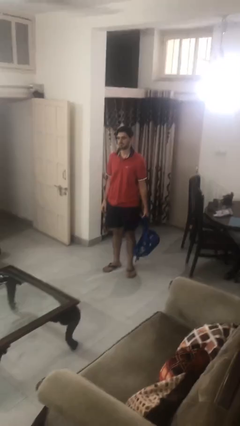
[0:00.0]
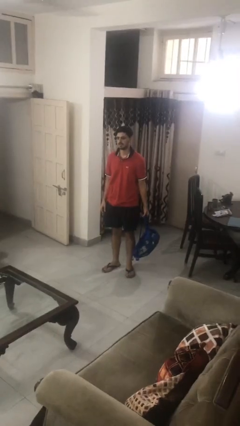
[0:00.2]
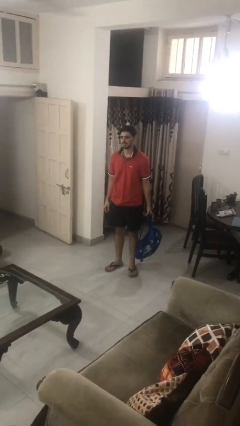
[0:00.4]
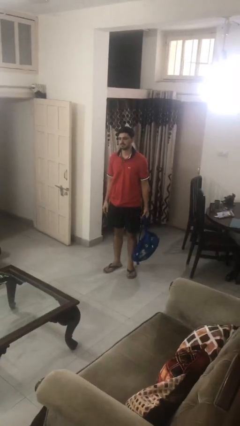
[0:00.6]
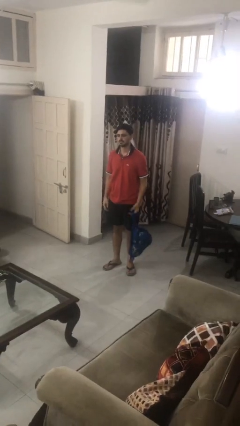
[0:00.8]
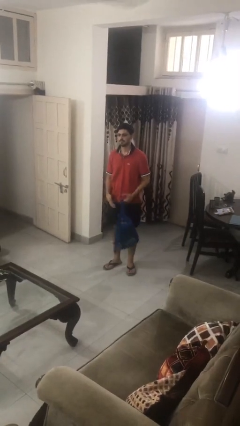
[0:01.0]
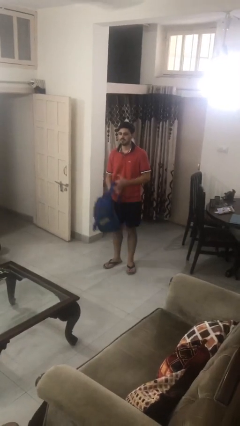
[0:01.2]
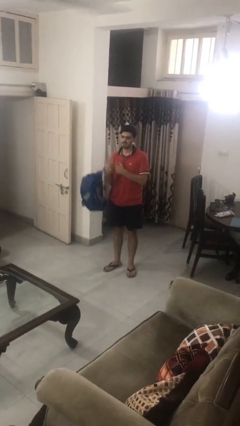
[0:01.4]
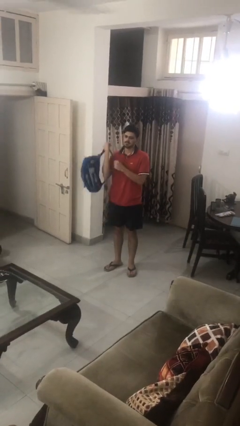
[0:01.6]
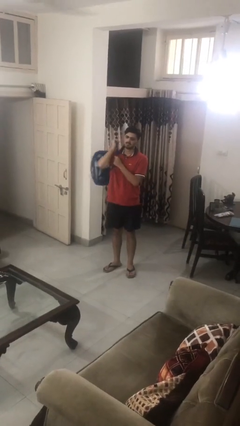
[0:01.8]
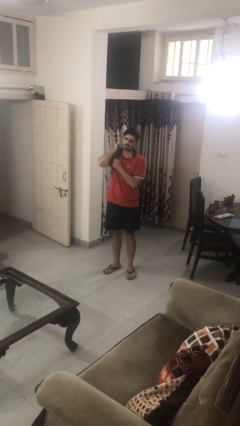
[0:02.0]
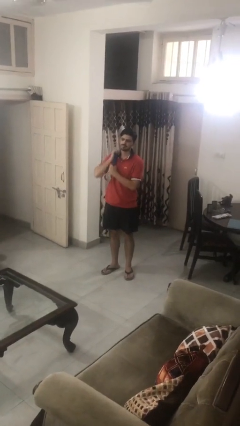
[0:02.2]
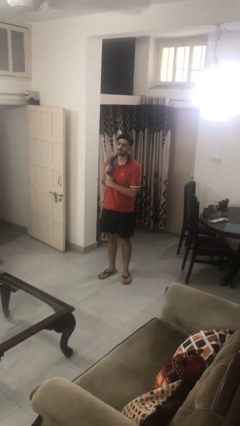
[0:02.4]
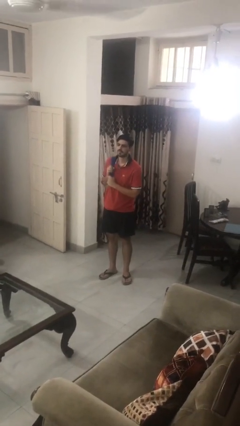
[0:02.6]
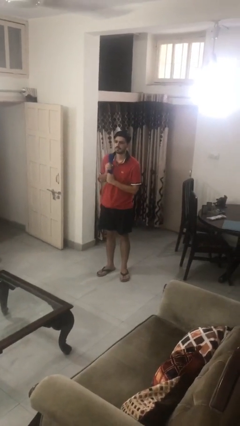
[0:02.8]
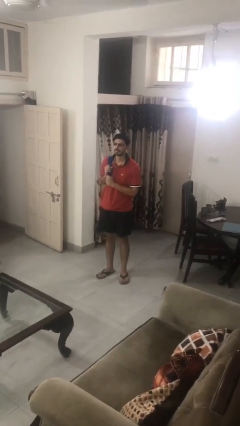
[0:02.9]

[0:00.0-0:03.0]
person puts on backpack

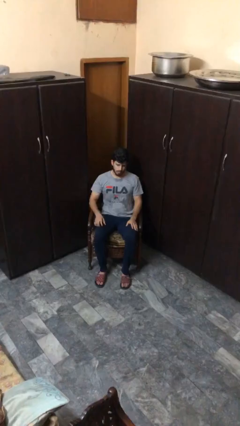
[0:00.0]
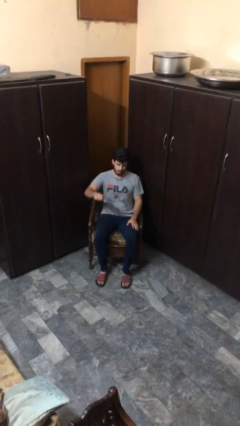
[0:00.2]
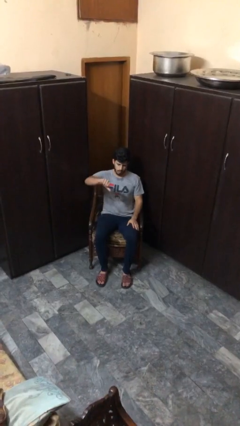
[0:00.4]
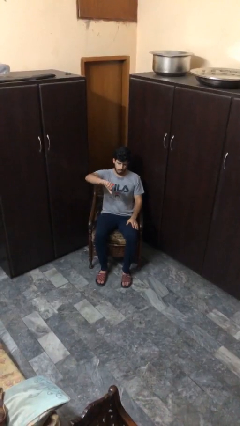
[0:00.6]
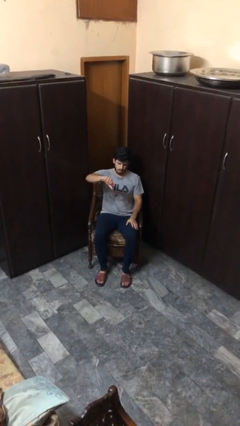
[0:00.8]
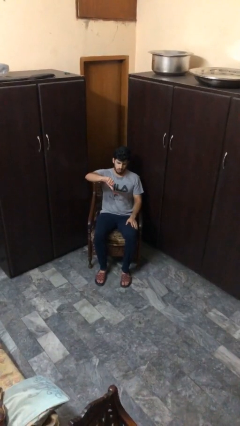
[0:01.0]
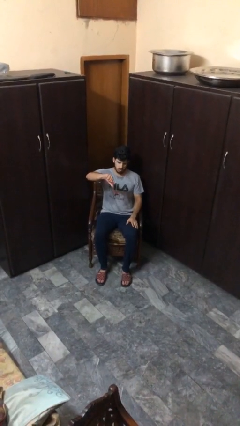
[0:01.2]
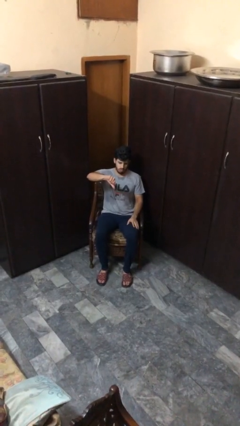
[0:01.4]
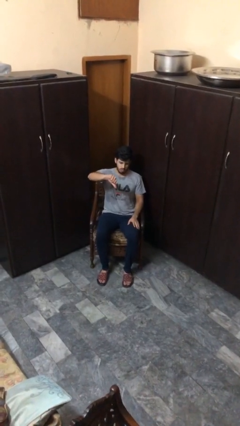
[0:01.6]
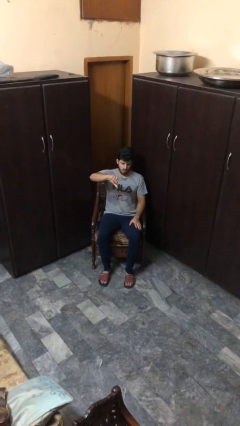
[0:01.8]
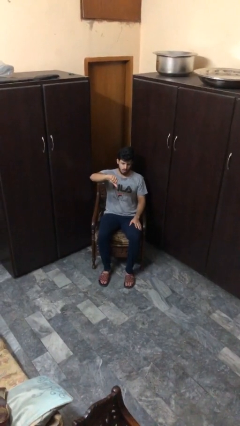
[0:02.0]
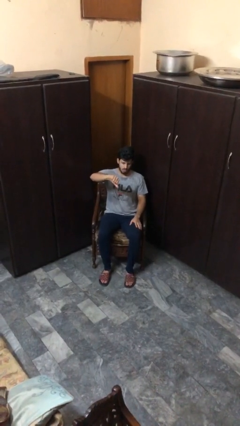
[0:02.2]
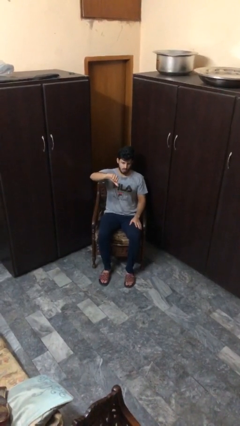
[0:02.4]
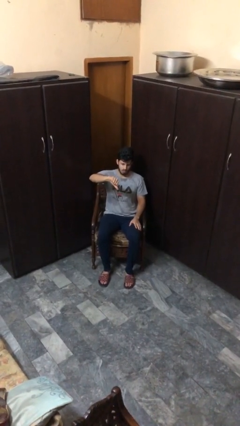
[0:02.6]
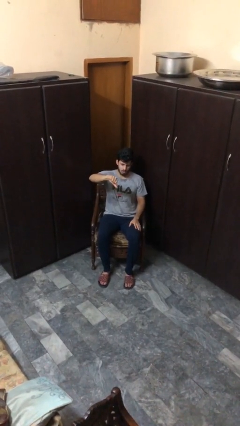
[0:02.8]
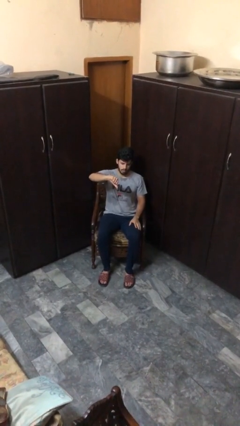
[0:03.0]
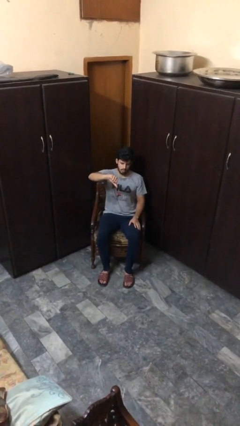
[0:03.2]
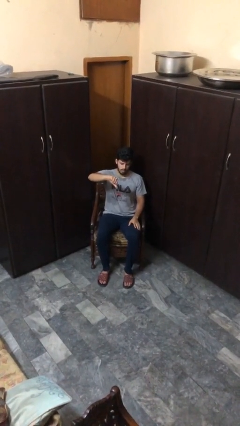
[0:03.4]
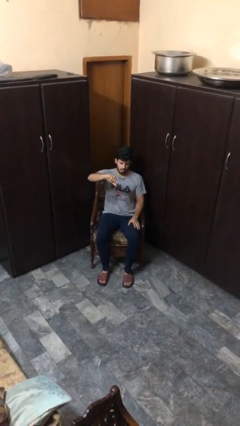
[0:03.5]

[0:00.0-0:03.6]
person gestures thumbs down

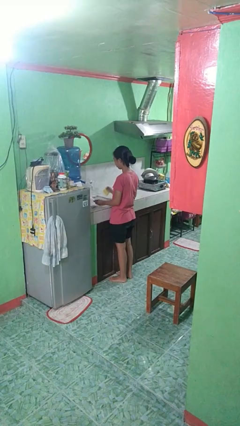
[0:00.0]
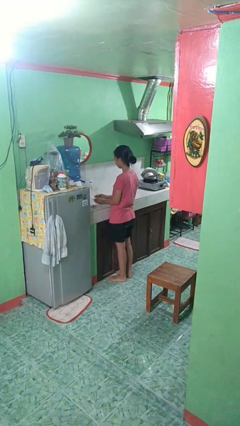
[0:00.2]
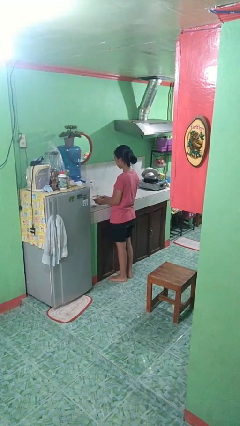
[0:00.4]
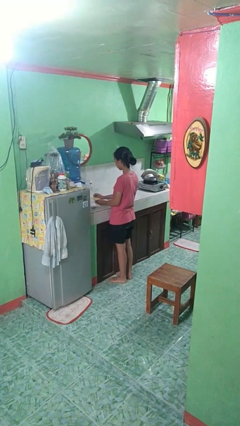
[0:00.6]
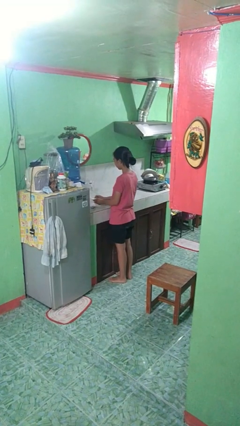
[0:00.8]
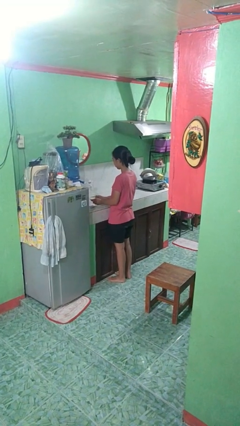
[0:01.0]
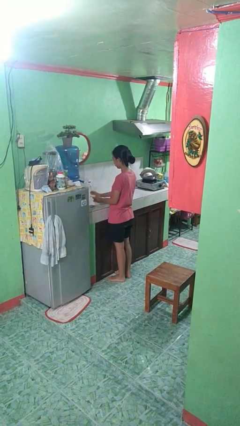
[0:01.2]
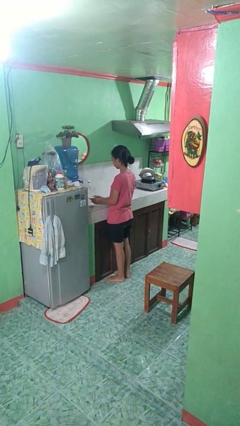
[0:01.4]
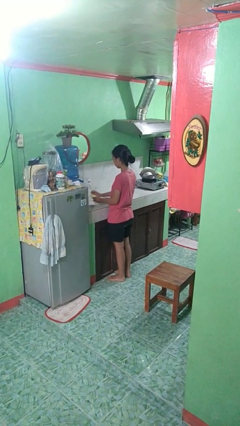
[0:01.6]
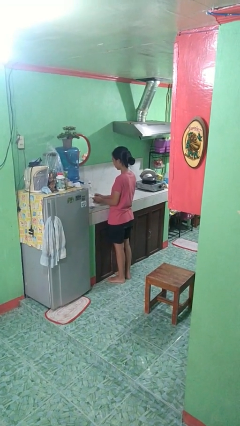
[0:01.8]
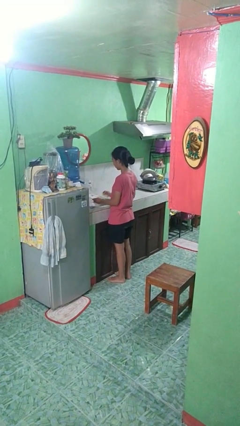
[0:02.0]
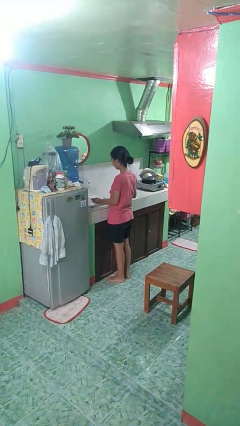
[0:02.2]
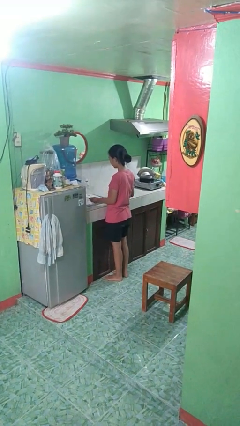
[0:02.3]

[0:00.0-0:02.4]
person washes dish

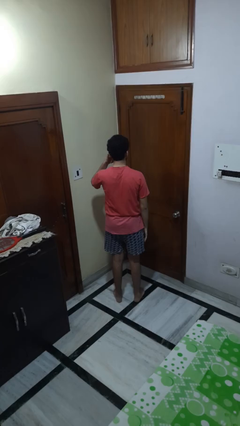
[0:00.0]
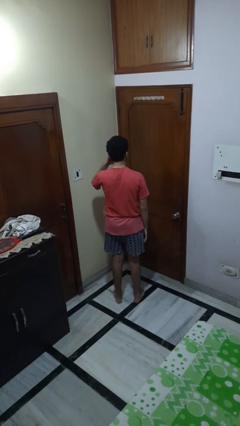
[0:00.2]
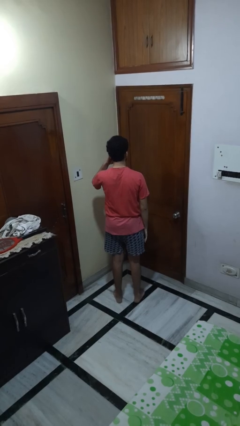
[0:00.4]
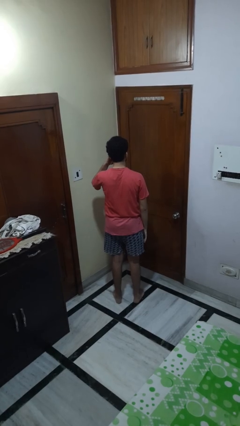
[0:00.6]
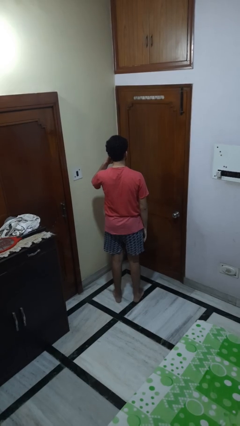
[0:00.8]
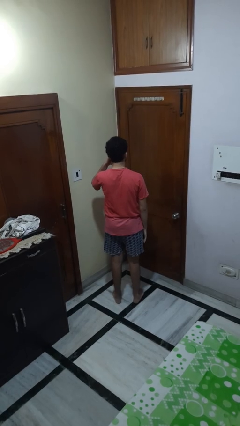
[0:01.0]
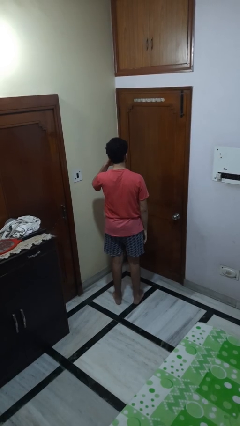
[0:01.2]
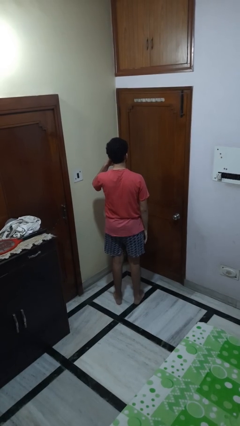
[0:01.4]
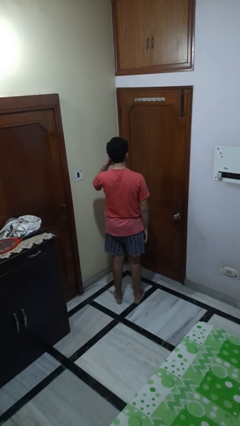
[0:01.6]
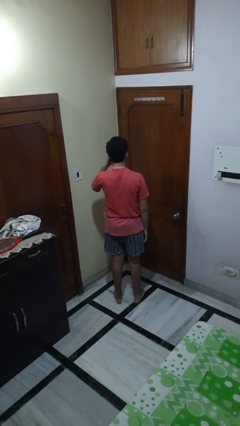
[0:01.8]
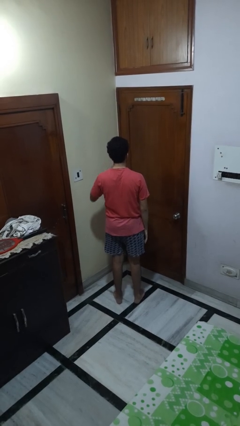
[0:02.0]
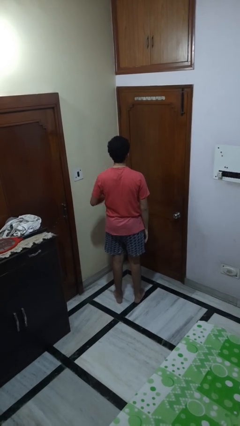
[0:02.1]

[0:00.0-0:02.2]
person gestures call me

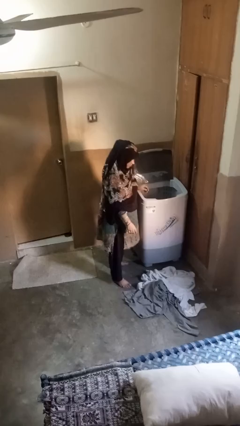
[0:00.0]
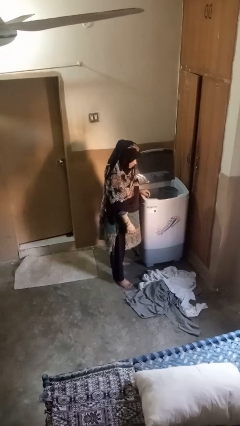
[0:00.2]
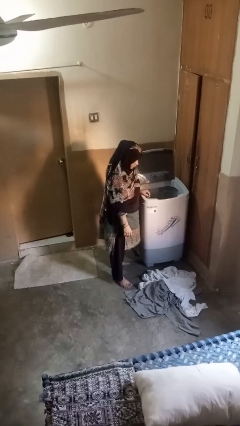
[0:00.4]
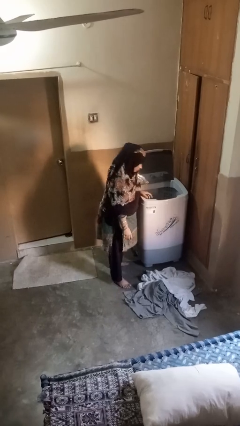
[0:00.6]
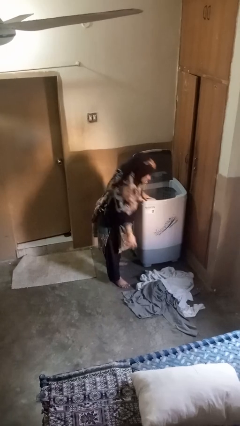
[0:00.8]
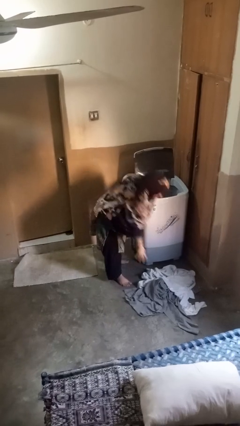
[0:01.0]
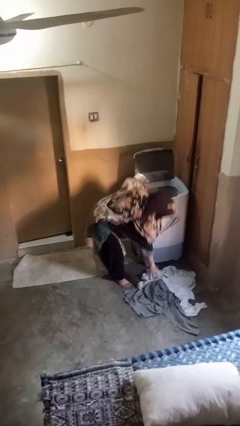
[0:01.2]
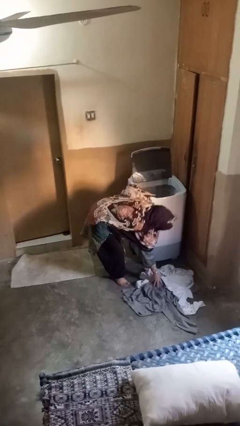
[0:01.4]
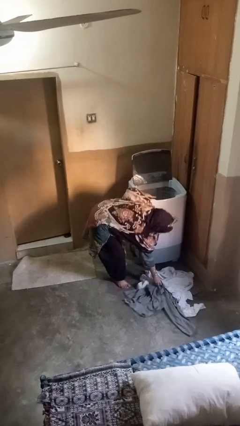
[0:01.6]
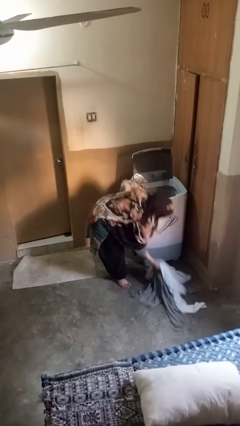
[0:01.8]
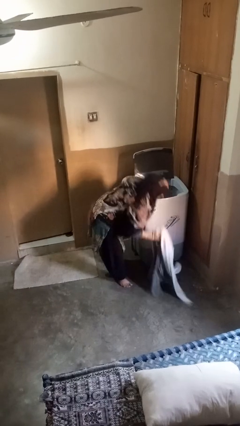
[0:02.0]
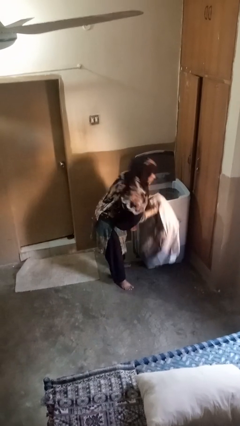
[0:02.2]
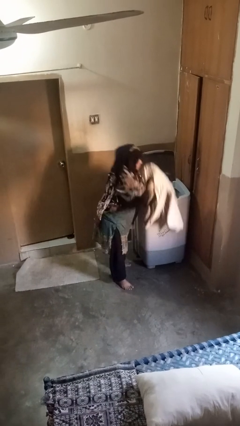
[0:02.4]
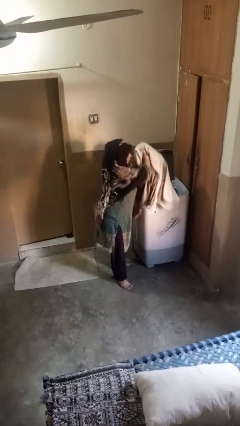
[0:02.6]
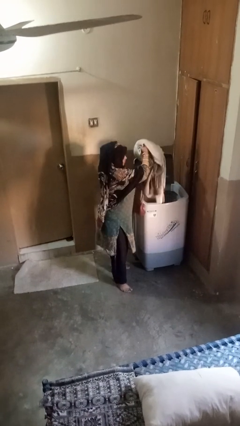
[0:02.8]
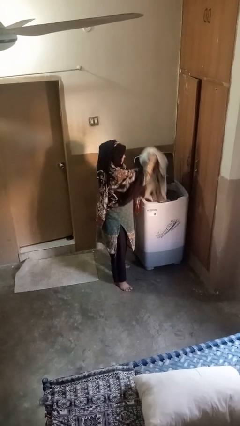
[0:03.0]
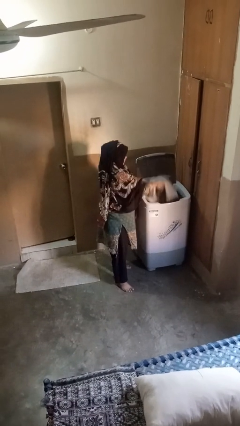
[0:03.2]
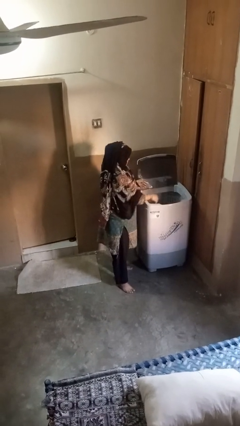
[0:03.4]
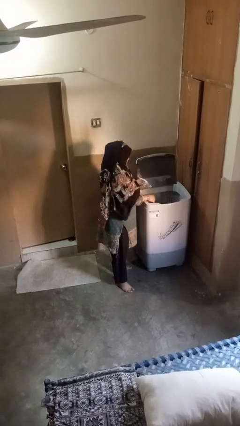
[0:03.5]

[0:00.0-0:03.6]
person loads clotheswasher

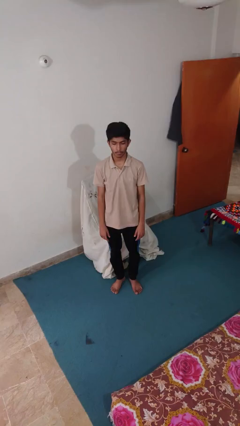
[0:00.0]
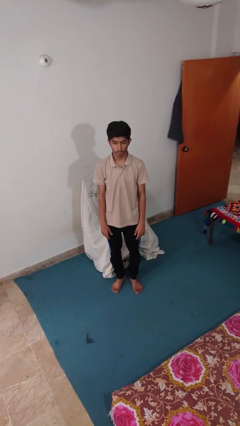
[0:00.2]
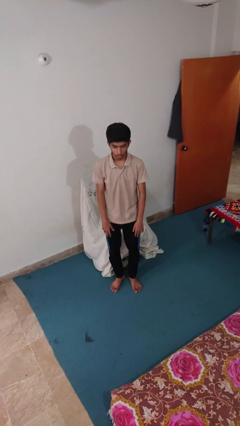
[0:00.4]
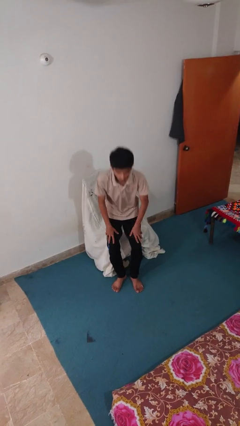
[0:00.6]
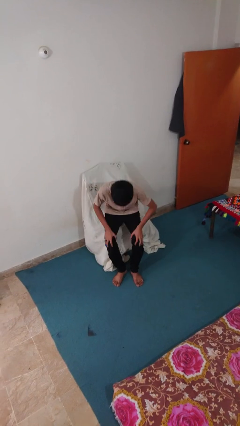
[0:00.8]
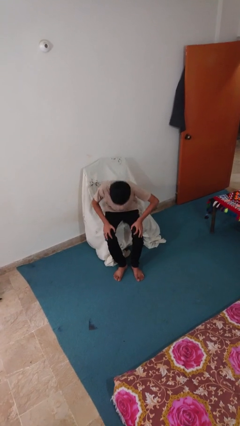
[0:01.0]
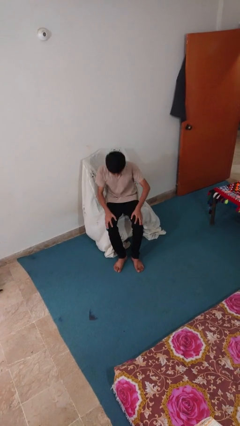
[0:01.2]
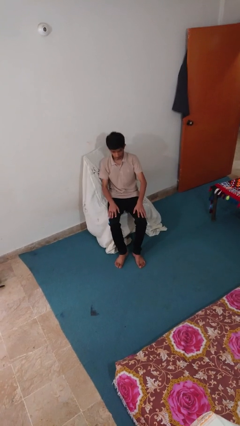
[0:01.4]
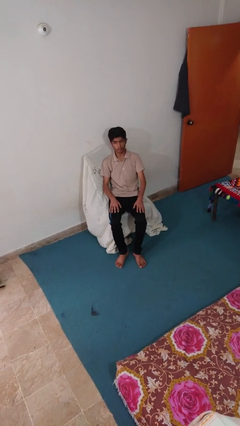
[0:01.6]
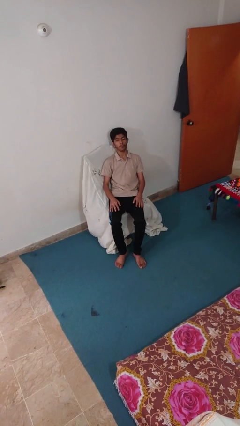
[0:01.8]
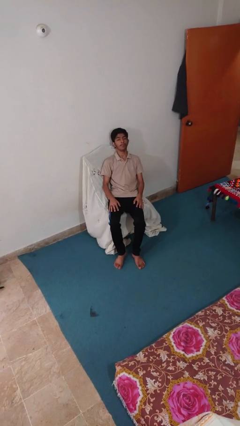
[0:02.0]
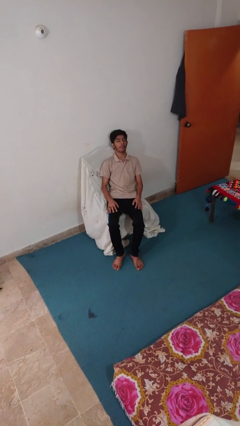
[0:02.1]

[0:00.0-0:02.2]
person lies down on couch

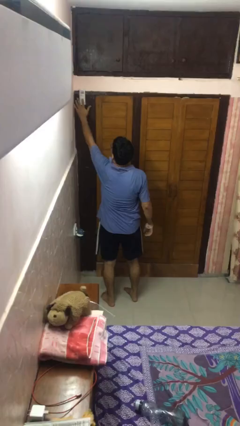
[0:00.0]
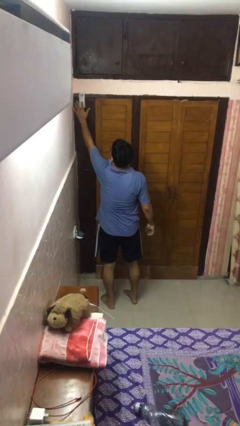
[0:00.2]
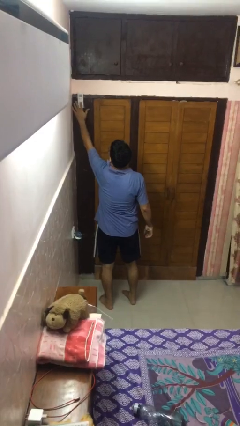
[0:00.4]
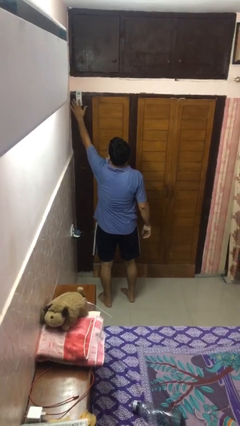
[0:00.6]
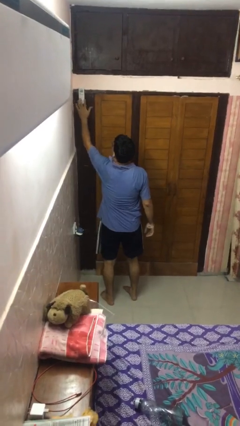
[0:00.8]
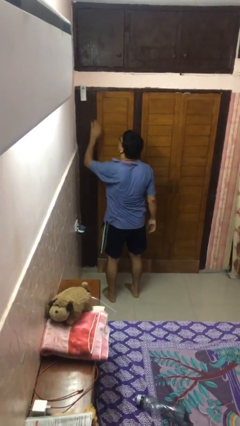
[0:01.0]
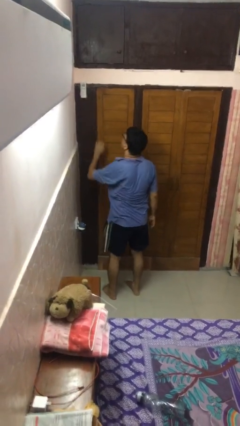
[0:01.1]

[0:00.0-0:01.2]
person adjusts thermostat
